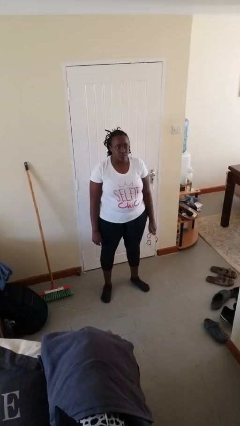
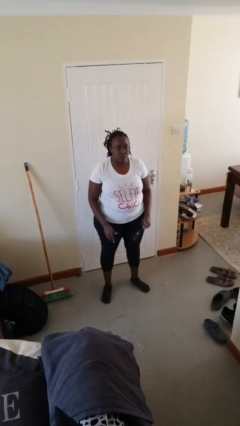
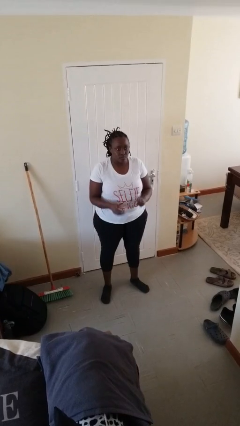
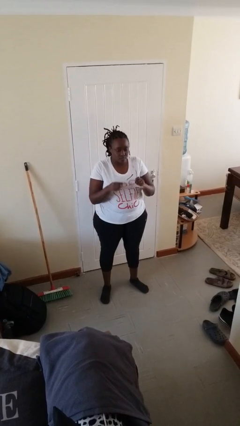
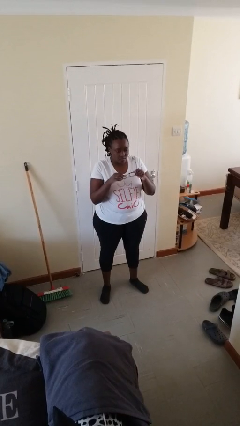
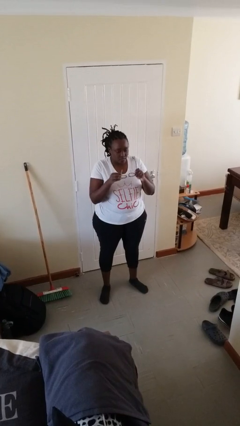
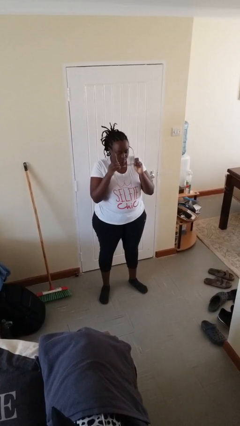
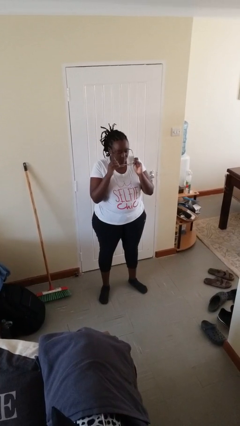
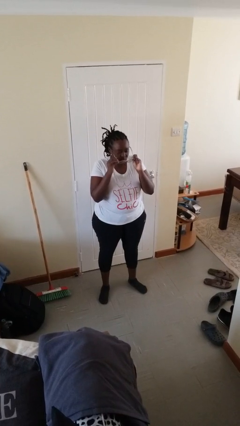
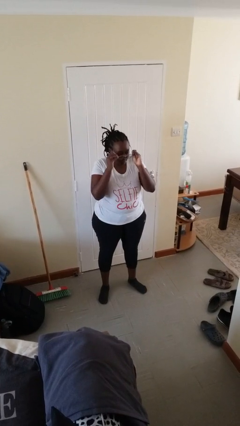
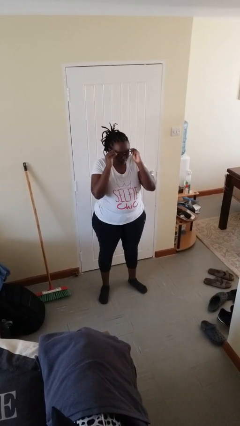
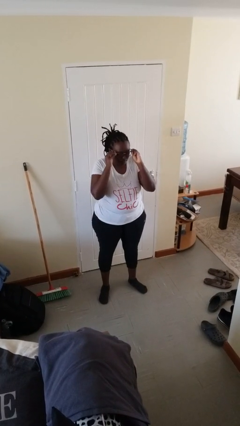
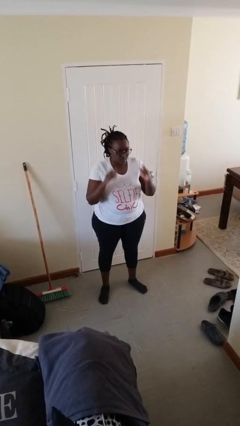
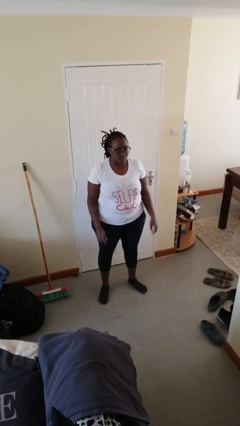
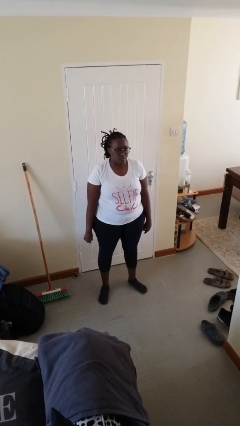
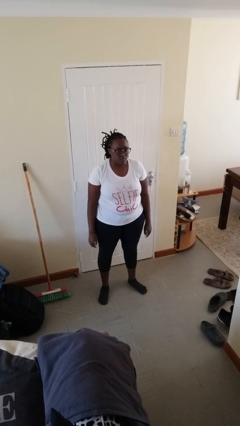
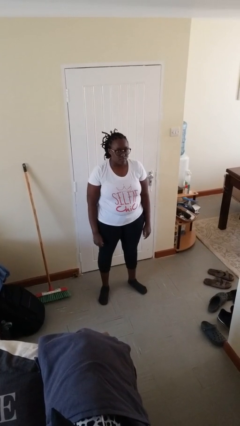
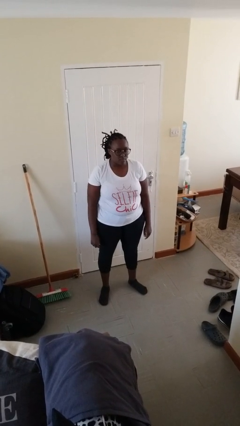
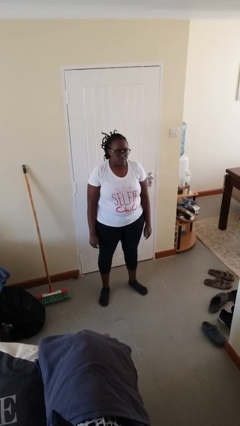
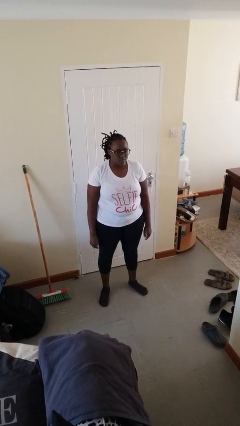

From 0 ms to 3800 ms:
person puts on glasses

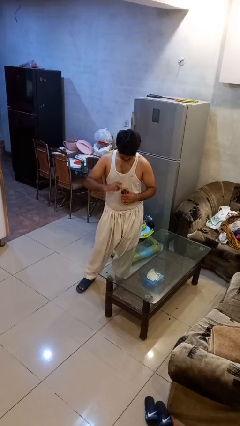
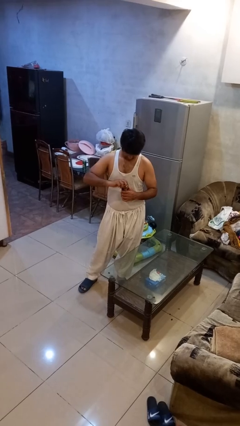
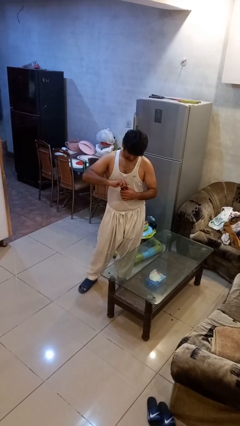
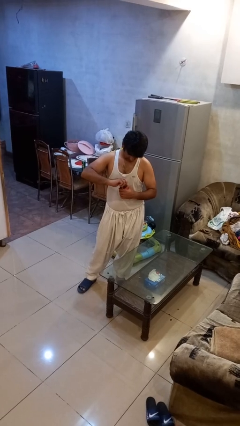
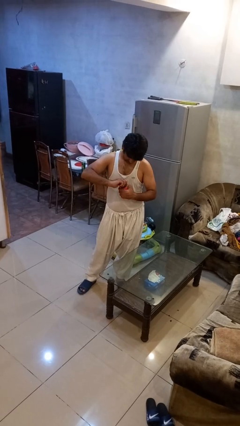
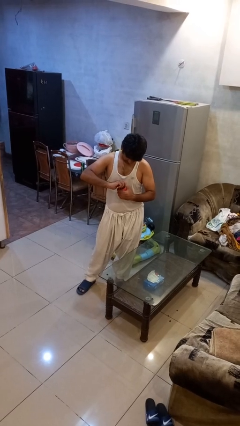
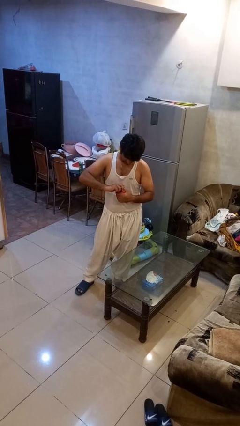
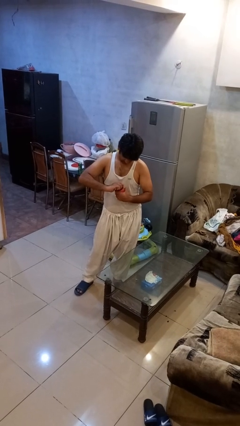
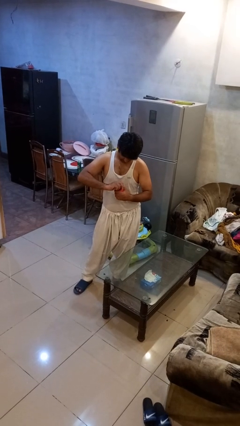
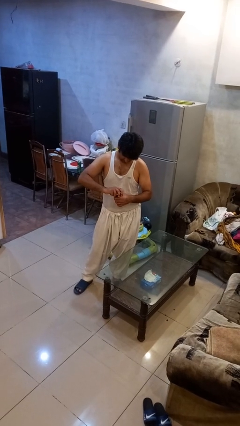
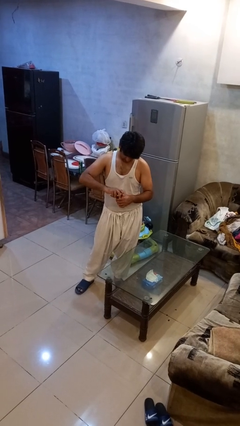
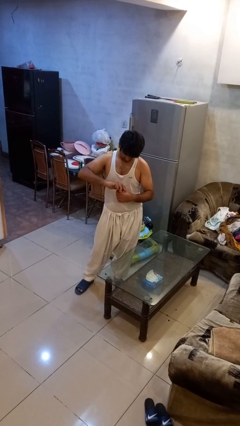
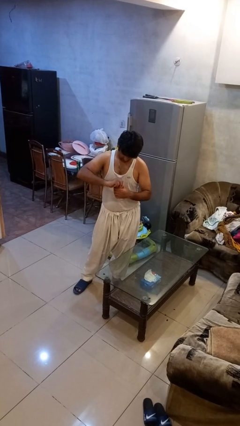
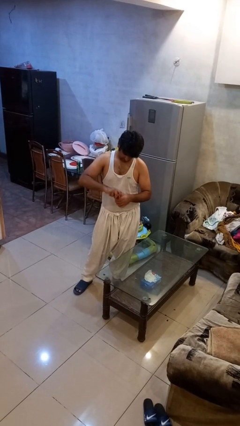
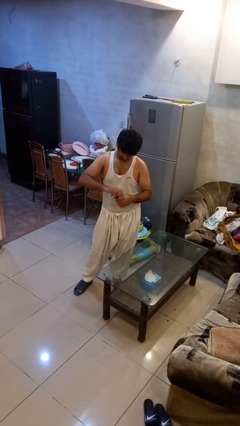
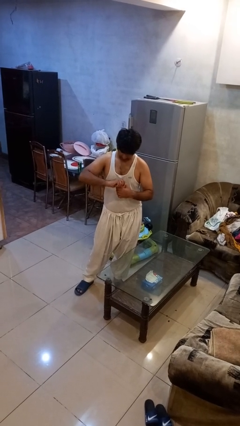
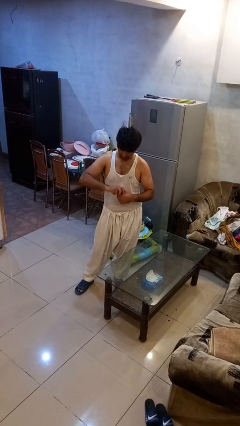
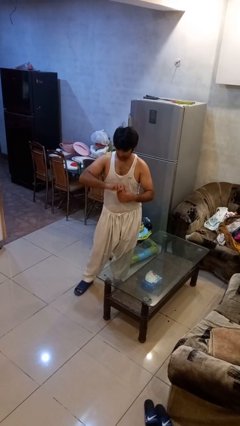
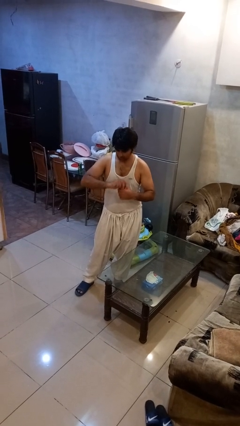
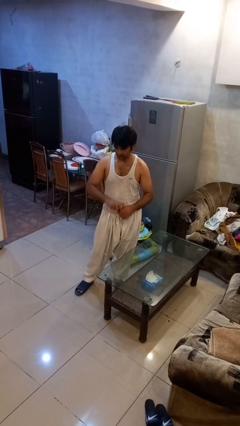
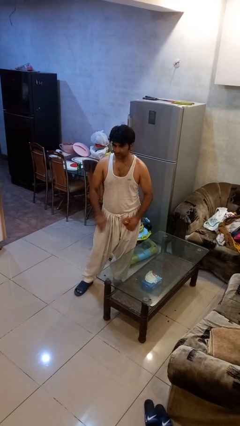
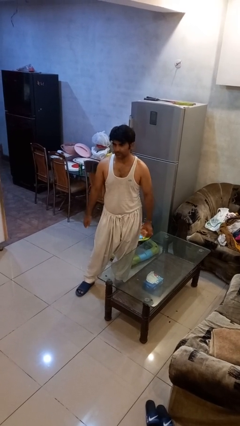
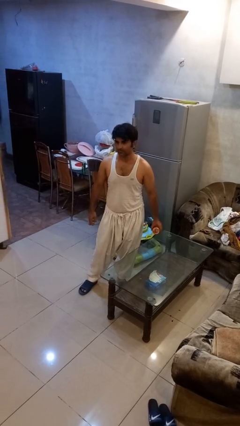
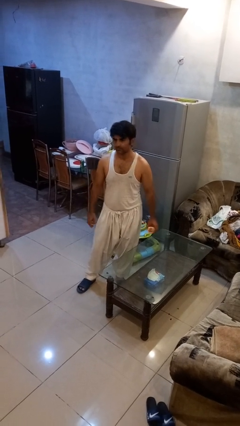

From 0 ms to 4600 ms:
person closes jar

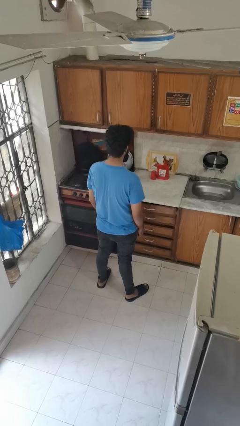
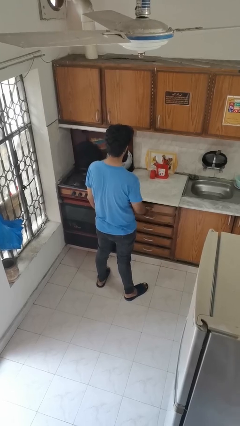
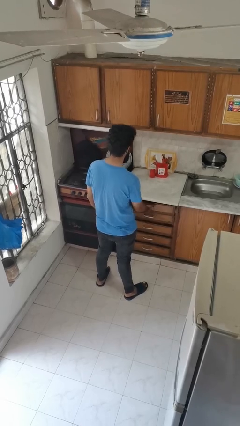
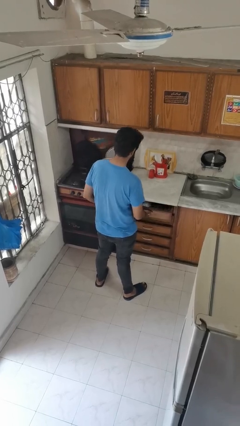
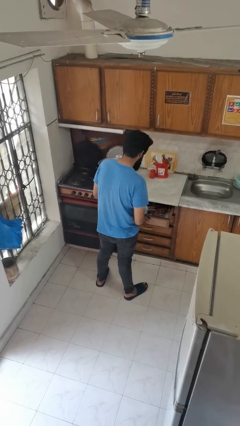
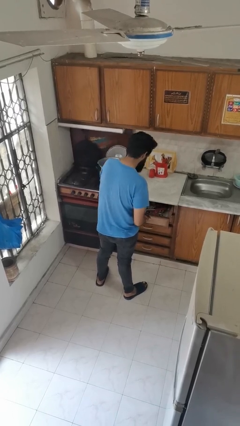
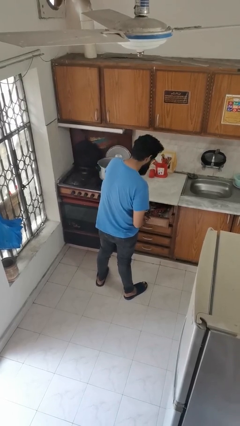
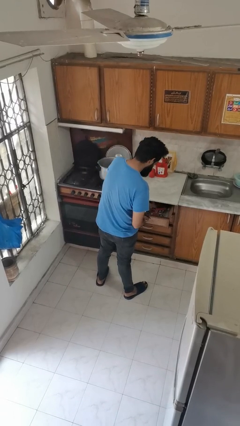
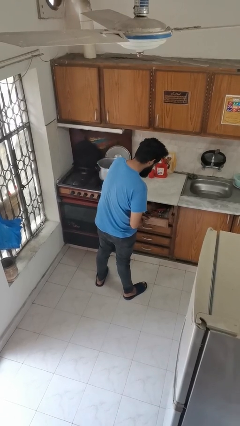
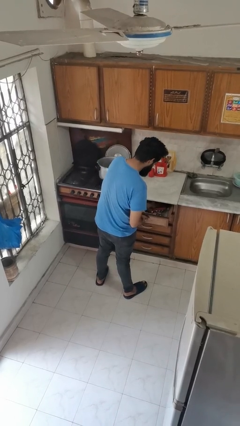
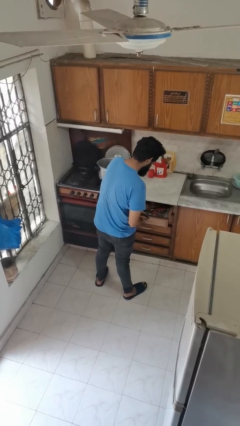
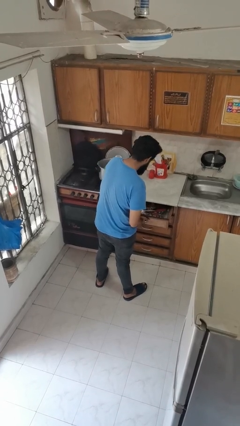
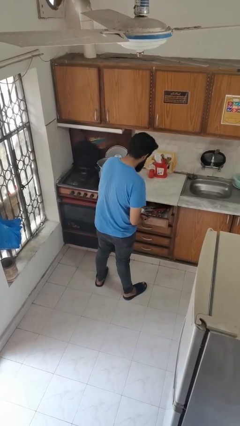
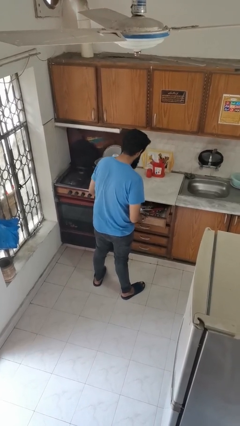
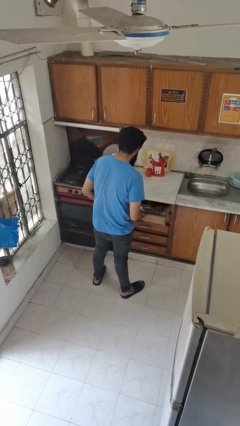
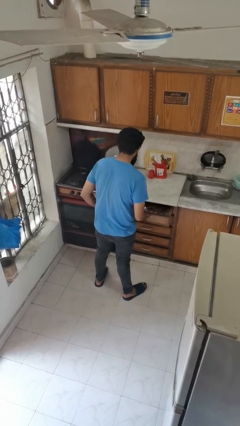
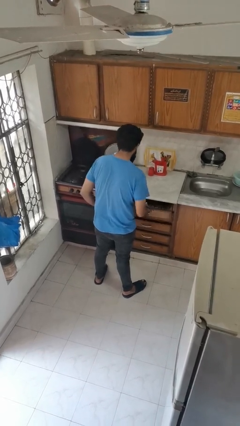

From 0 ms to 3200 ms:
person searches in kitchen drawer

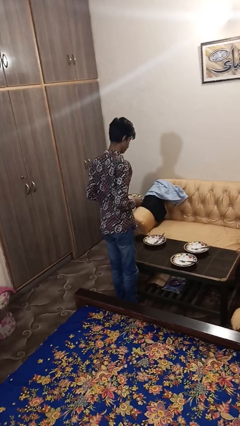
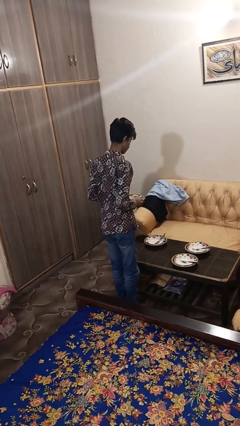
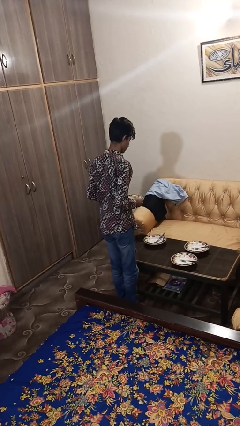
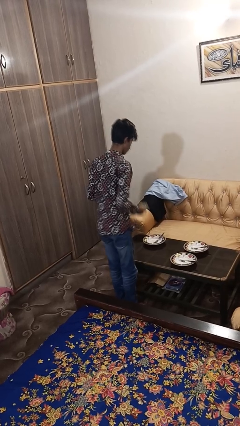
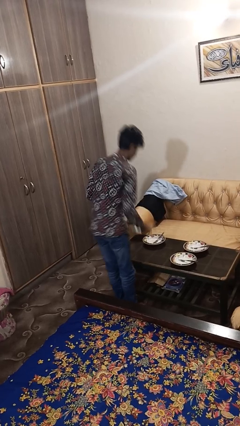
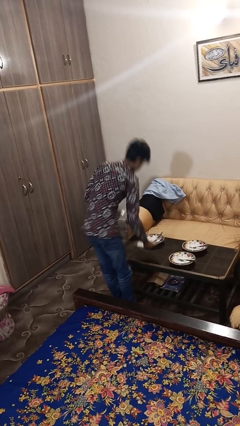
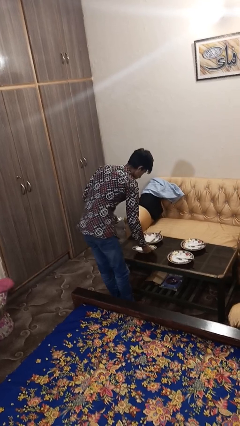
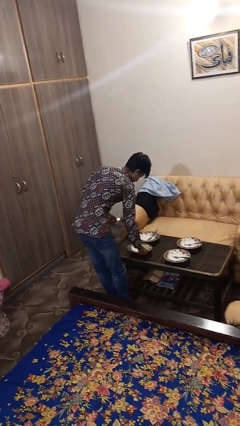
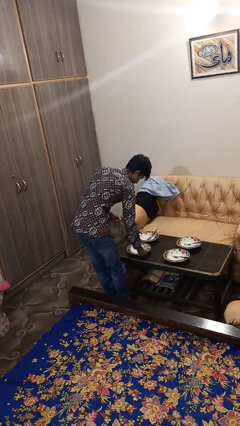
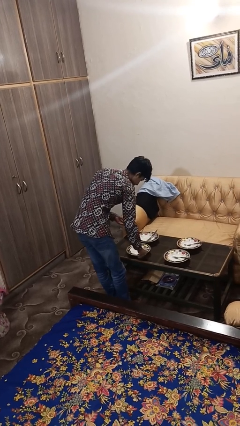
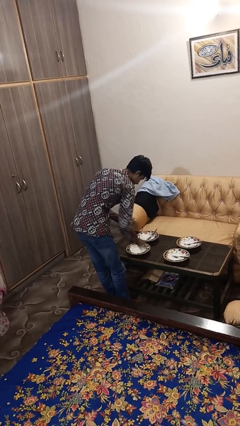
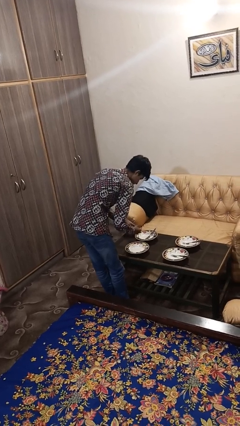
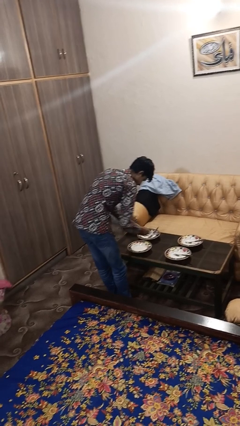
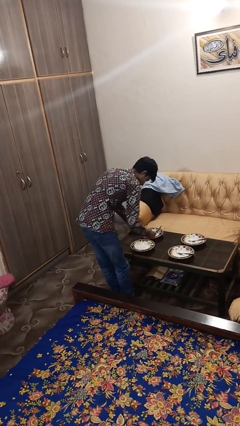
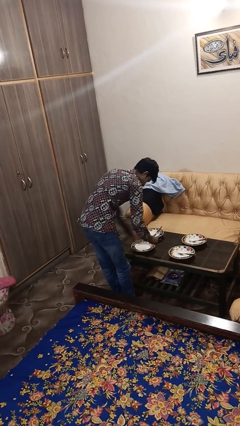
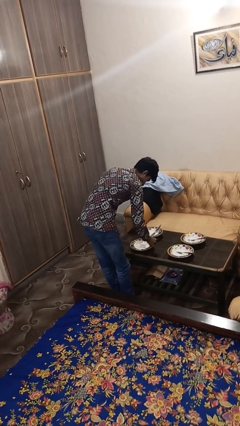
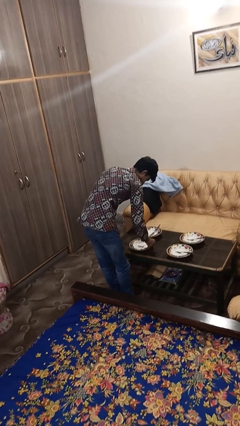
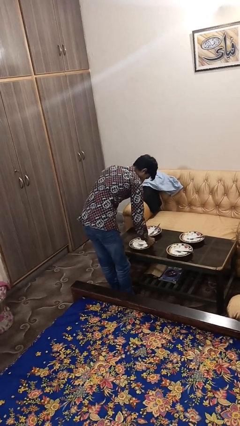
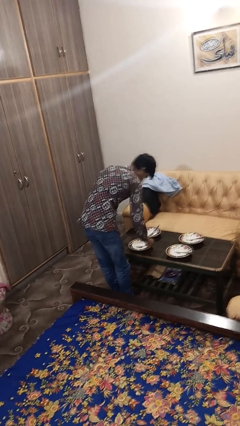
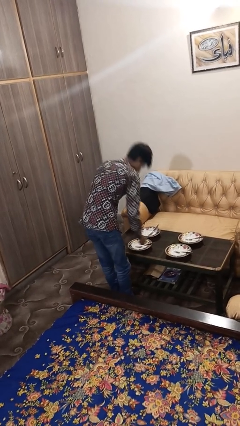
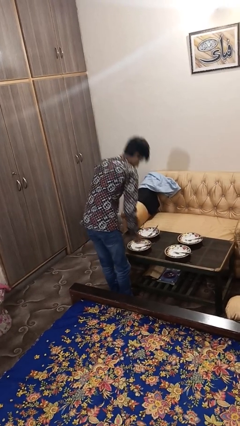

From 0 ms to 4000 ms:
person sets table

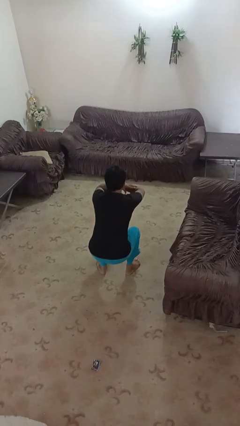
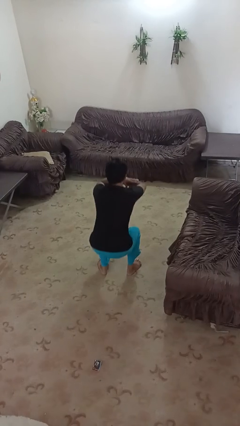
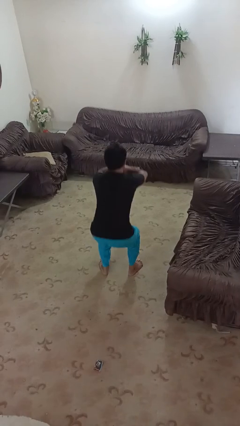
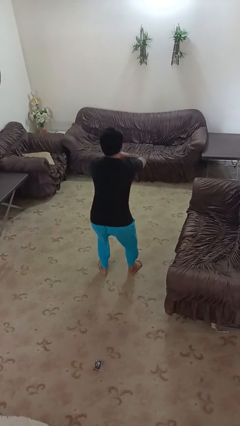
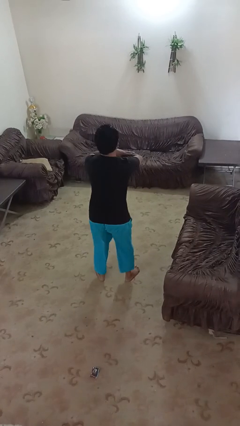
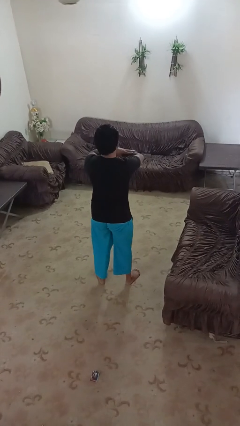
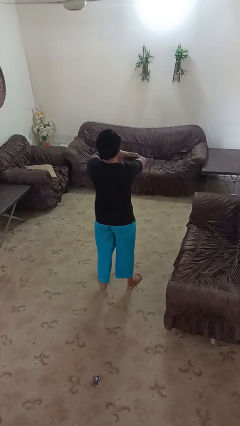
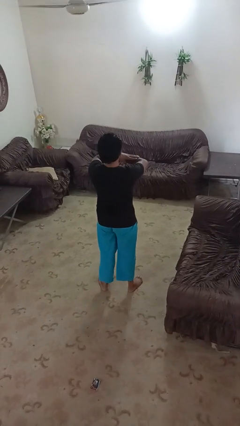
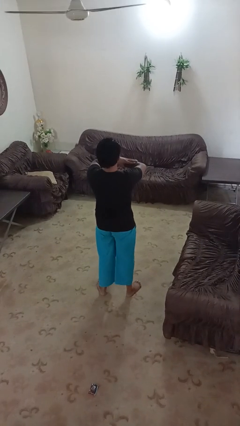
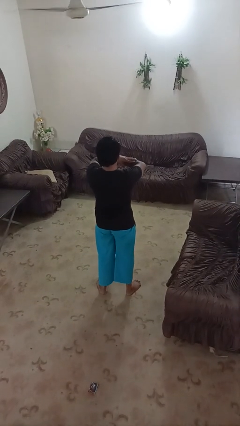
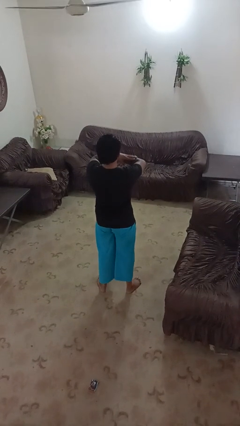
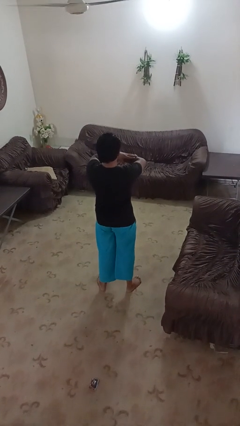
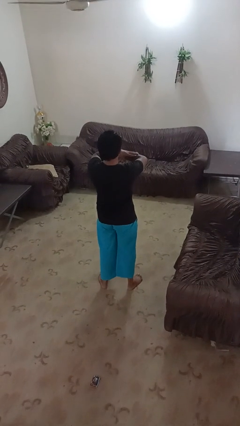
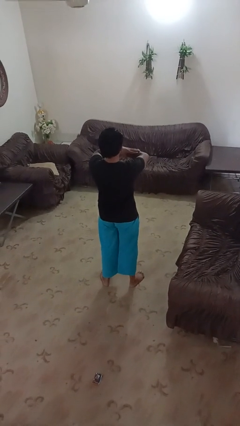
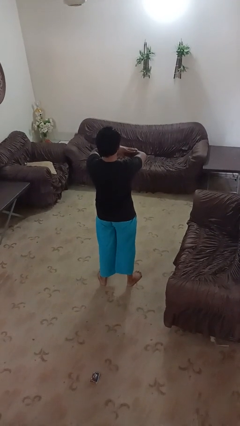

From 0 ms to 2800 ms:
person stands up
